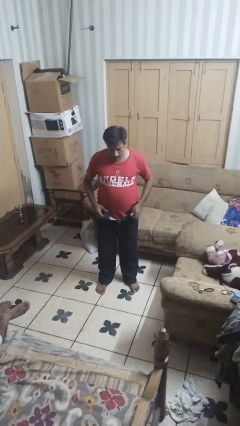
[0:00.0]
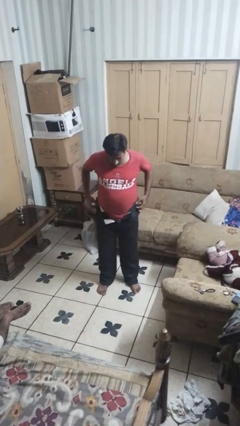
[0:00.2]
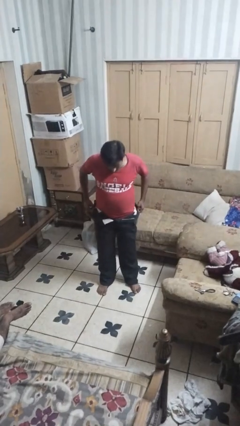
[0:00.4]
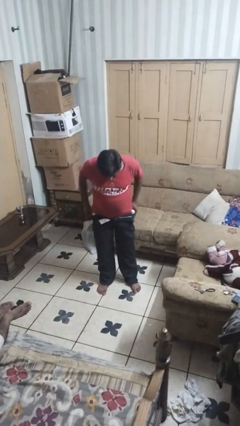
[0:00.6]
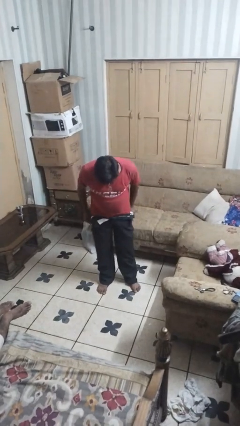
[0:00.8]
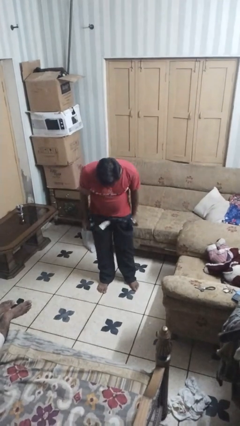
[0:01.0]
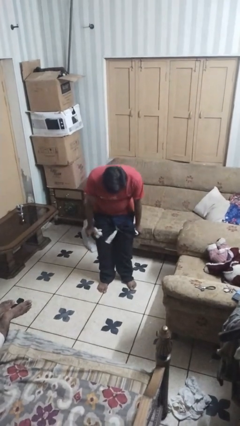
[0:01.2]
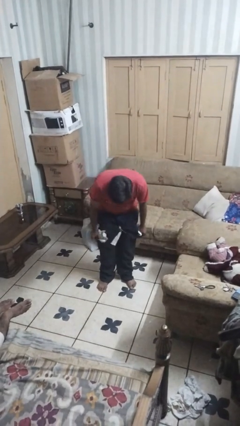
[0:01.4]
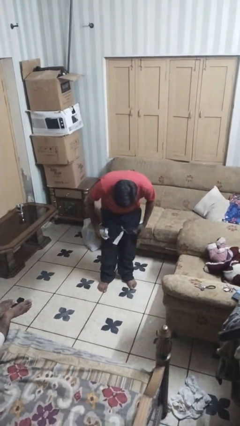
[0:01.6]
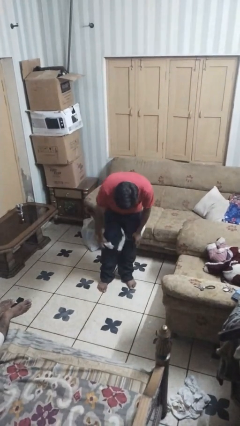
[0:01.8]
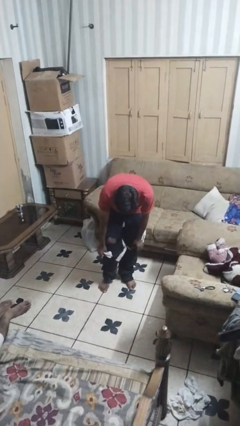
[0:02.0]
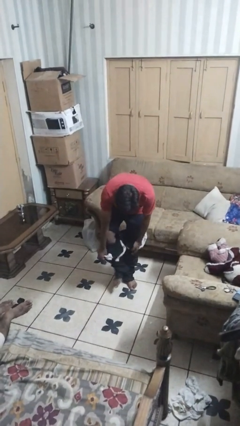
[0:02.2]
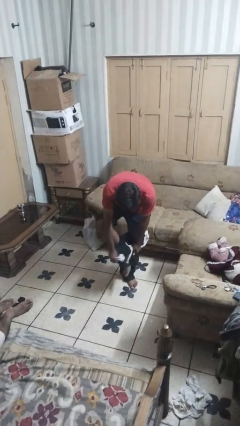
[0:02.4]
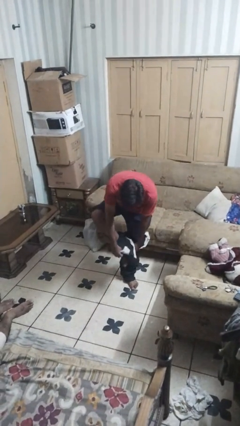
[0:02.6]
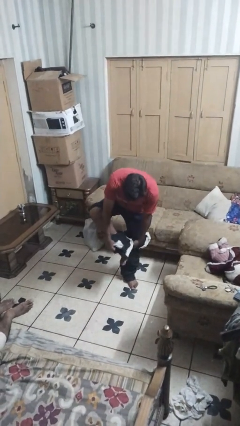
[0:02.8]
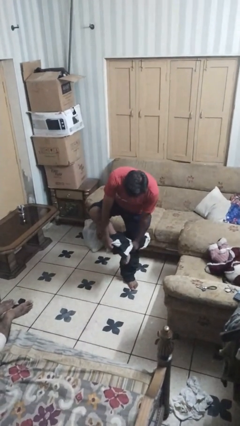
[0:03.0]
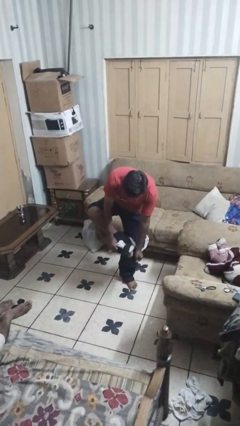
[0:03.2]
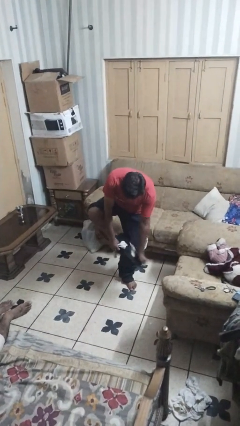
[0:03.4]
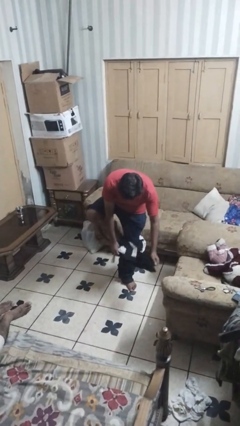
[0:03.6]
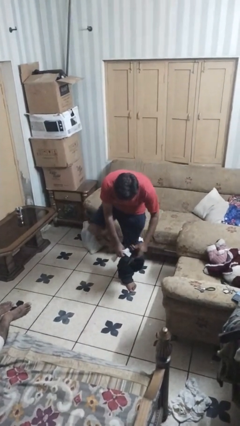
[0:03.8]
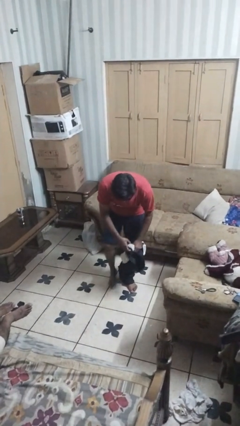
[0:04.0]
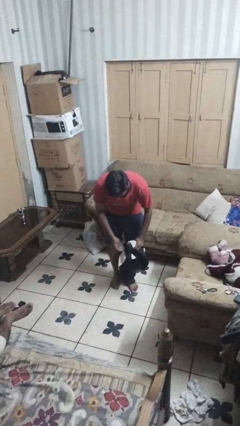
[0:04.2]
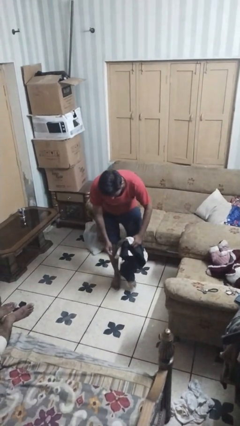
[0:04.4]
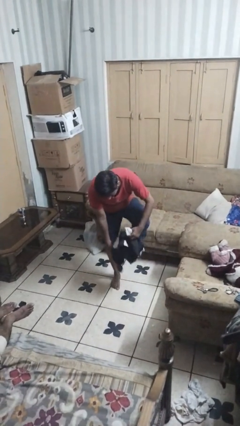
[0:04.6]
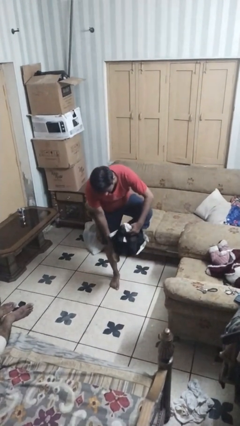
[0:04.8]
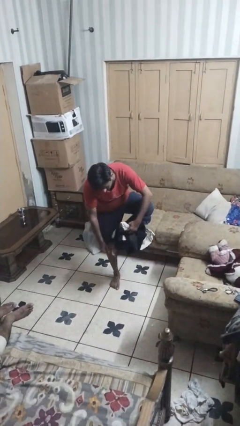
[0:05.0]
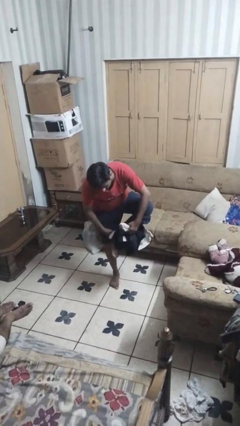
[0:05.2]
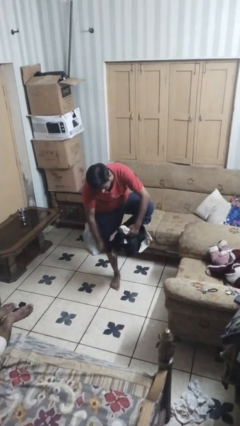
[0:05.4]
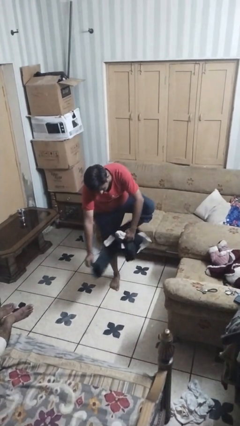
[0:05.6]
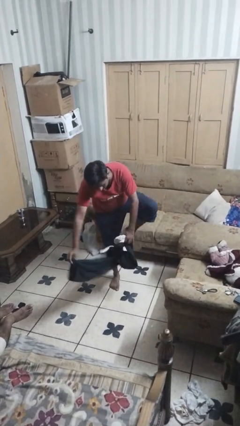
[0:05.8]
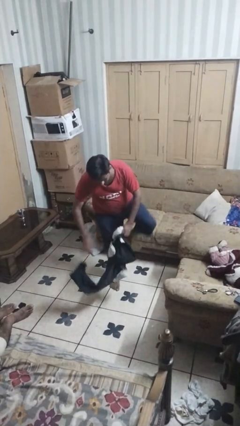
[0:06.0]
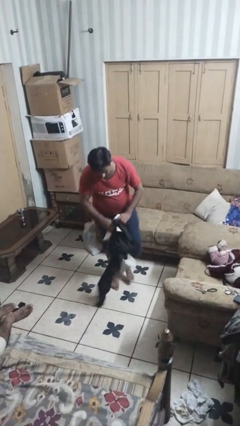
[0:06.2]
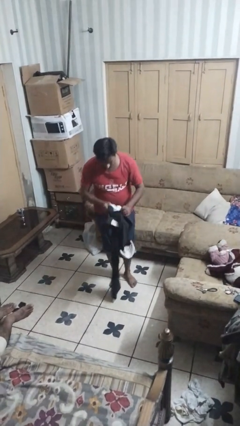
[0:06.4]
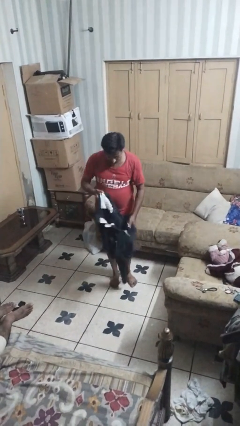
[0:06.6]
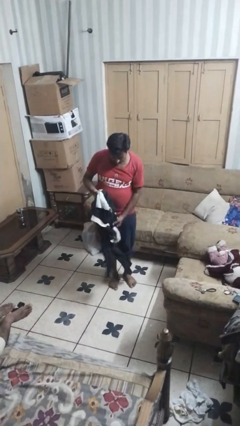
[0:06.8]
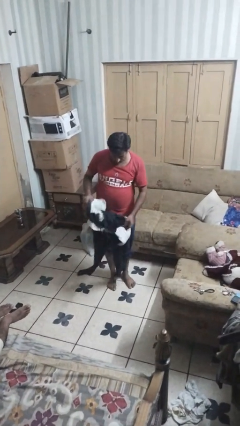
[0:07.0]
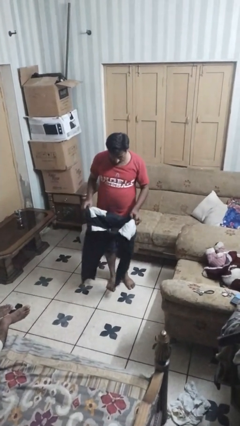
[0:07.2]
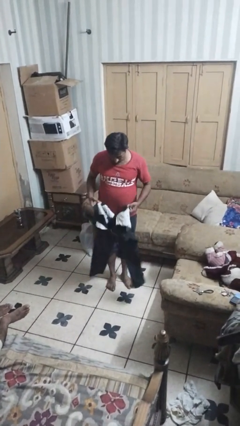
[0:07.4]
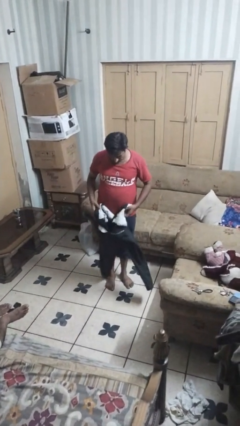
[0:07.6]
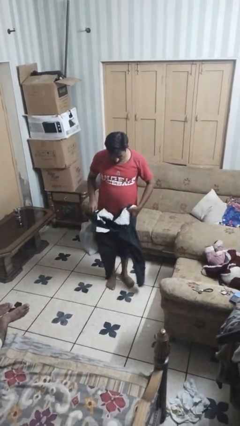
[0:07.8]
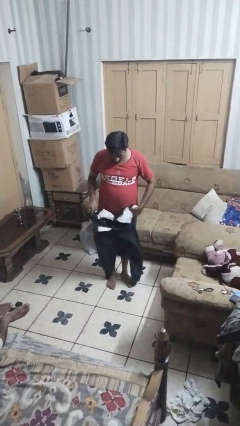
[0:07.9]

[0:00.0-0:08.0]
person takes off pants

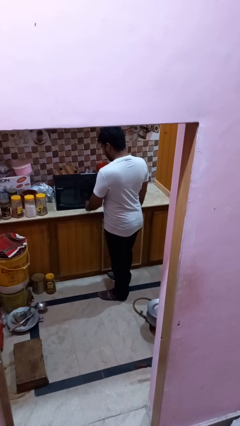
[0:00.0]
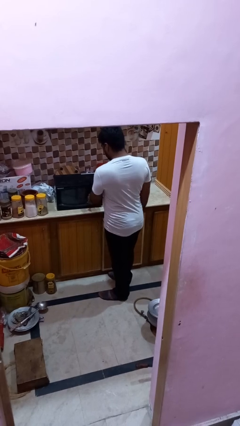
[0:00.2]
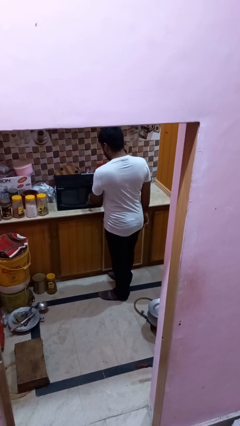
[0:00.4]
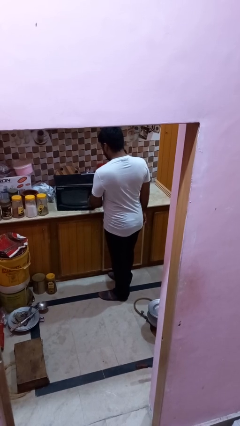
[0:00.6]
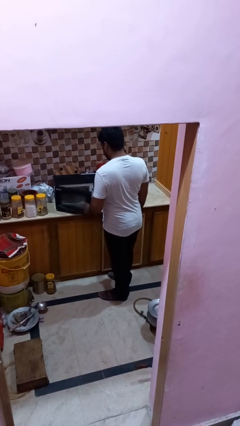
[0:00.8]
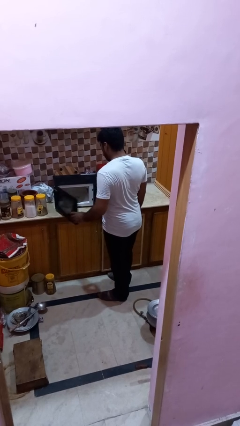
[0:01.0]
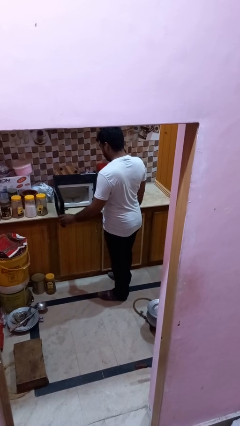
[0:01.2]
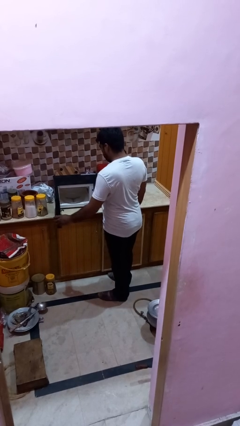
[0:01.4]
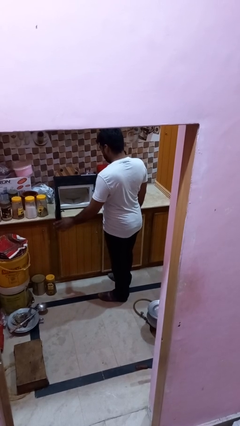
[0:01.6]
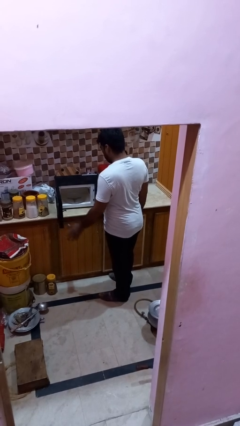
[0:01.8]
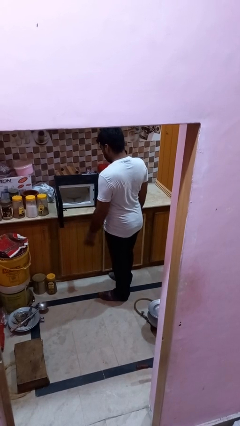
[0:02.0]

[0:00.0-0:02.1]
person opens oven door

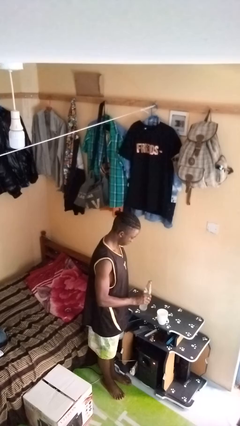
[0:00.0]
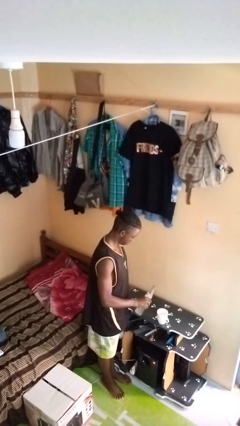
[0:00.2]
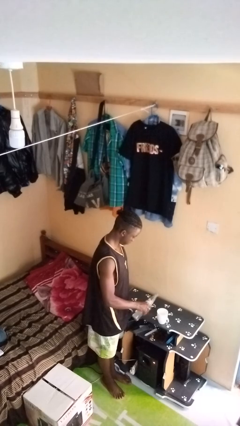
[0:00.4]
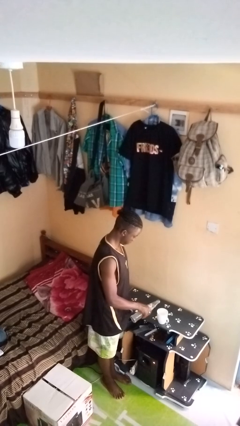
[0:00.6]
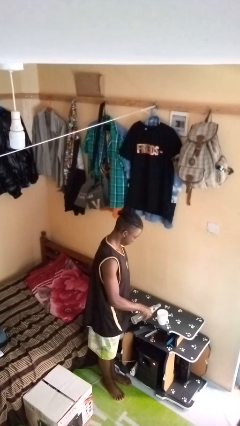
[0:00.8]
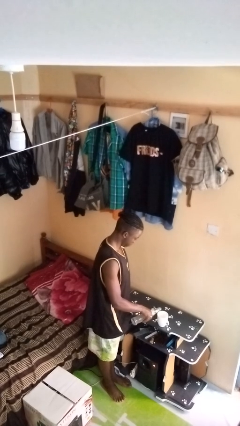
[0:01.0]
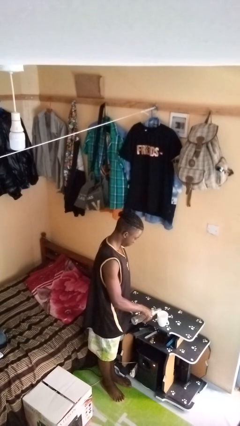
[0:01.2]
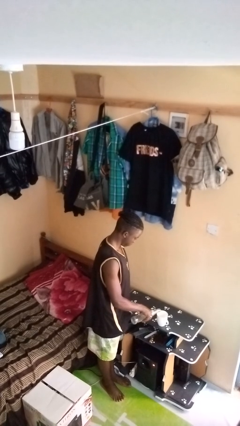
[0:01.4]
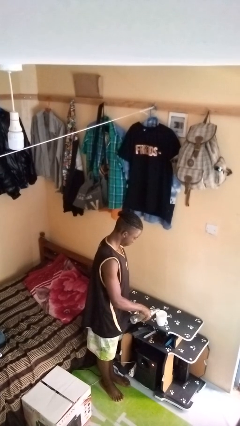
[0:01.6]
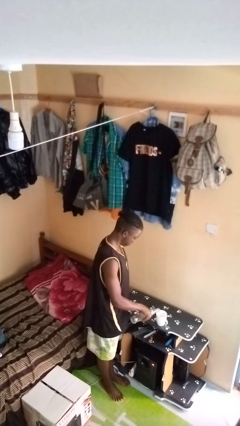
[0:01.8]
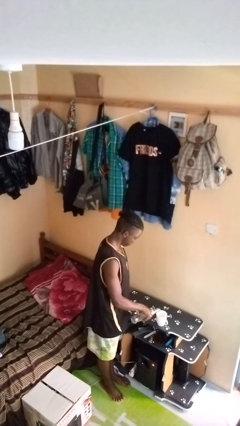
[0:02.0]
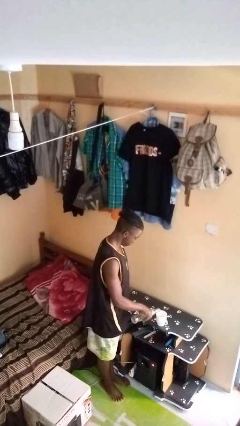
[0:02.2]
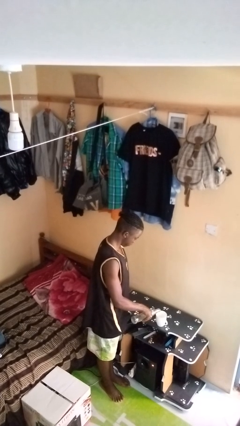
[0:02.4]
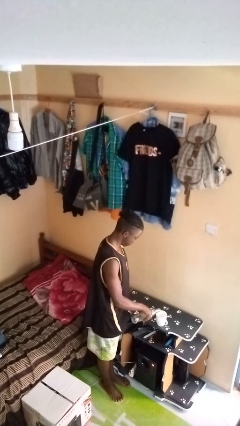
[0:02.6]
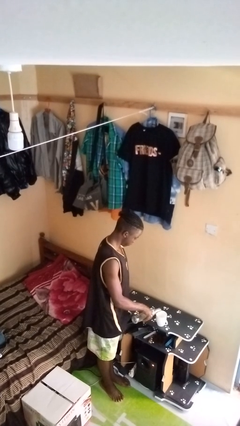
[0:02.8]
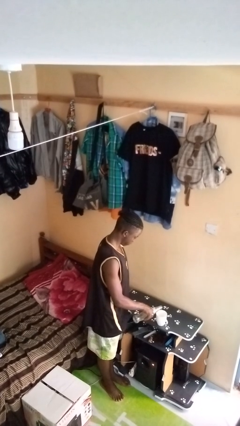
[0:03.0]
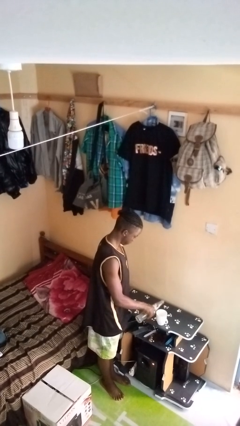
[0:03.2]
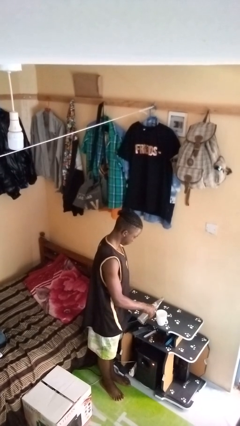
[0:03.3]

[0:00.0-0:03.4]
person pours liquid into cup

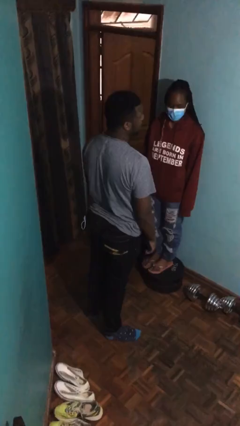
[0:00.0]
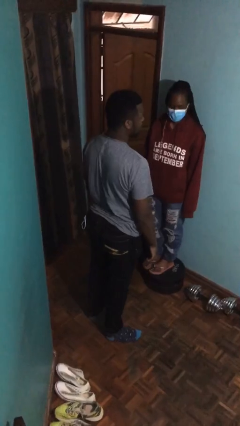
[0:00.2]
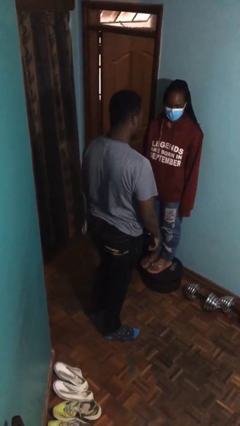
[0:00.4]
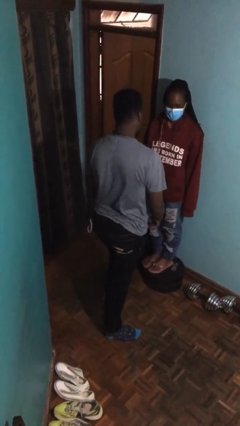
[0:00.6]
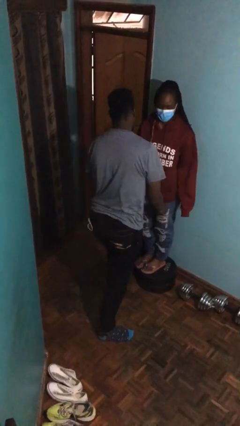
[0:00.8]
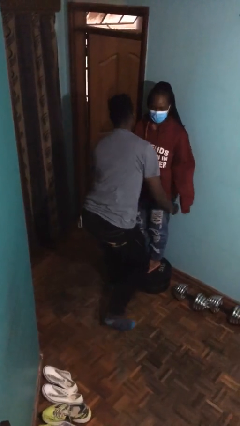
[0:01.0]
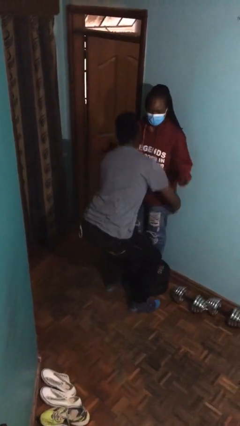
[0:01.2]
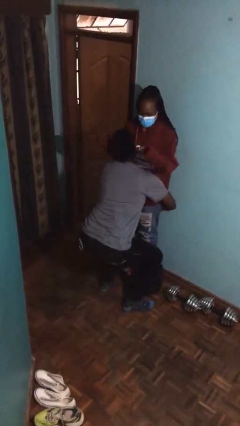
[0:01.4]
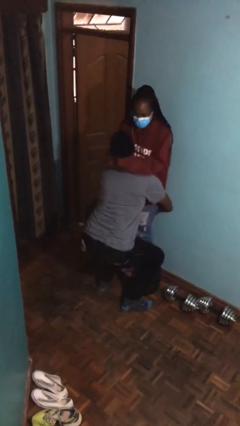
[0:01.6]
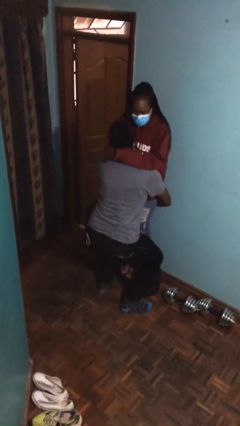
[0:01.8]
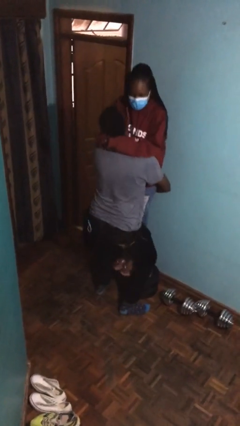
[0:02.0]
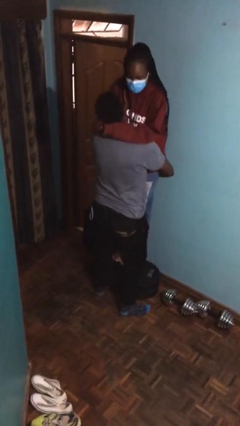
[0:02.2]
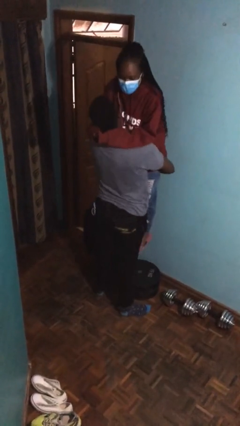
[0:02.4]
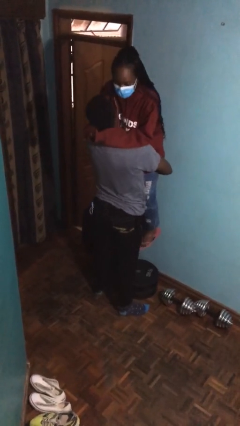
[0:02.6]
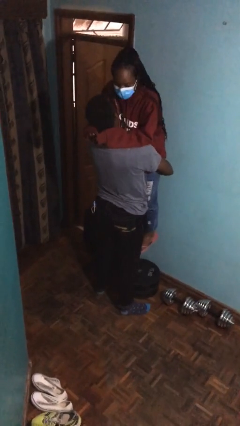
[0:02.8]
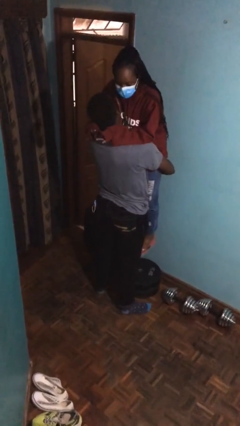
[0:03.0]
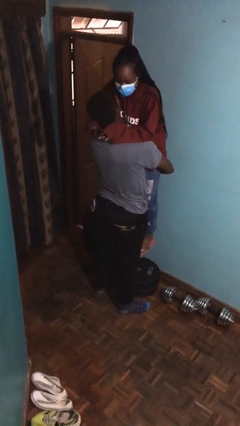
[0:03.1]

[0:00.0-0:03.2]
person picks up person

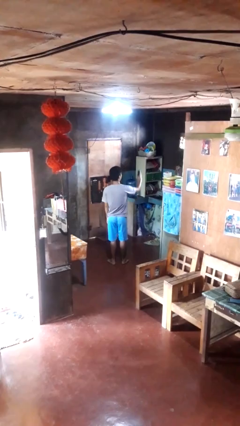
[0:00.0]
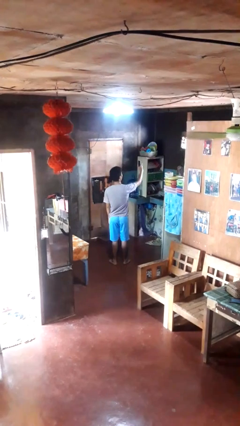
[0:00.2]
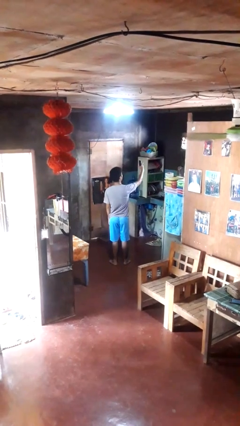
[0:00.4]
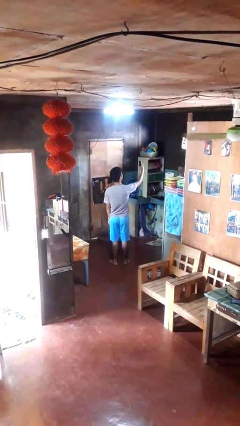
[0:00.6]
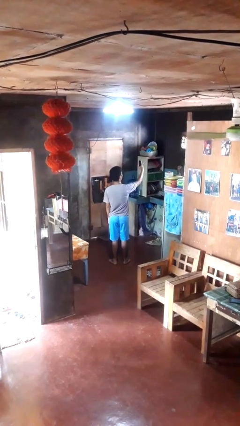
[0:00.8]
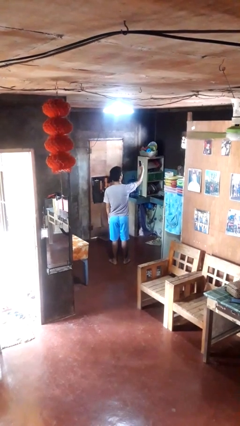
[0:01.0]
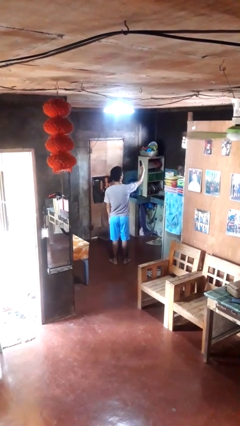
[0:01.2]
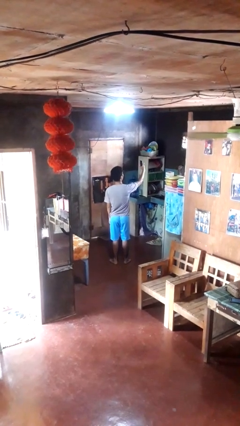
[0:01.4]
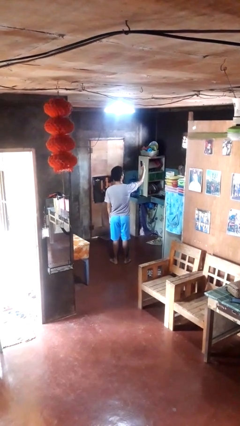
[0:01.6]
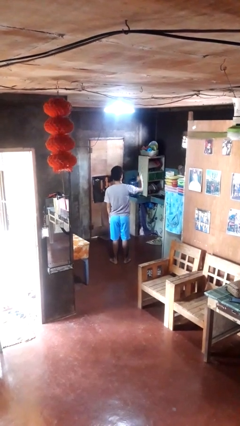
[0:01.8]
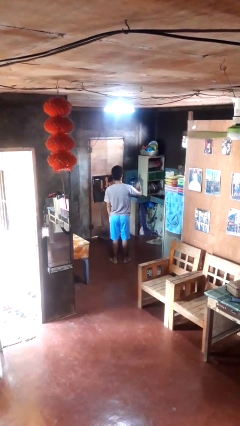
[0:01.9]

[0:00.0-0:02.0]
person takes selfie
